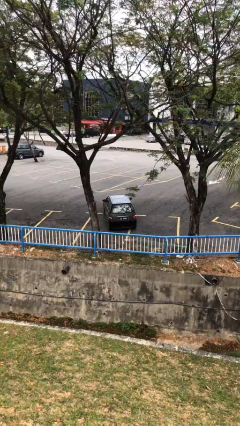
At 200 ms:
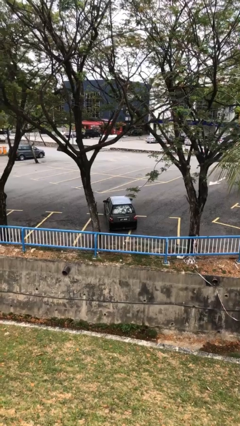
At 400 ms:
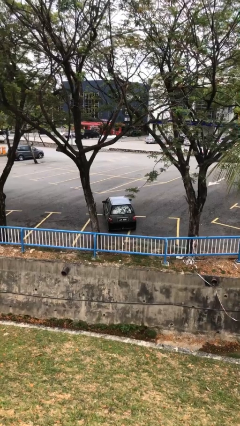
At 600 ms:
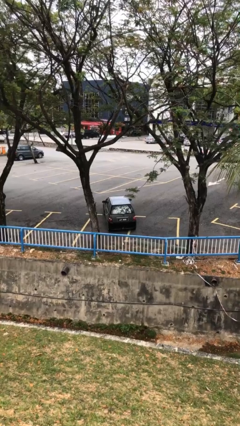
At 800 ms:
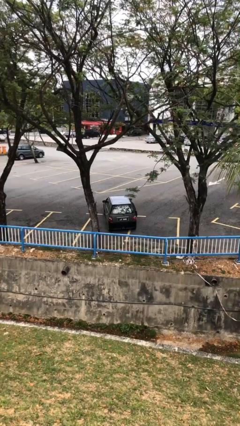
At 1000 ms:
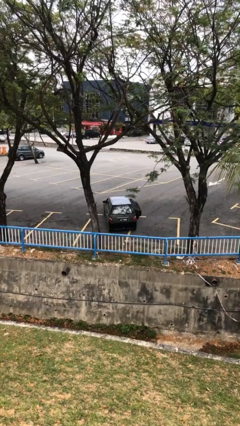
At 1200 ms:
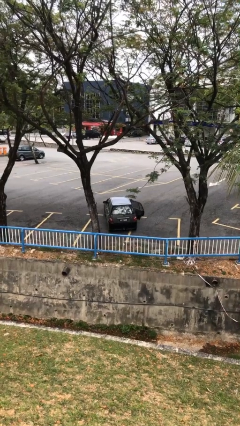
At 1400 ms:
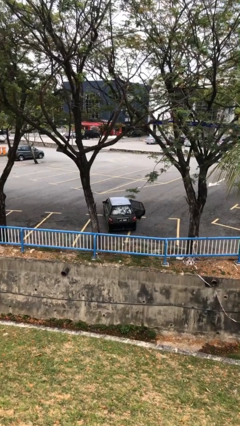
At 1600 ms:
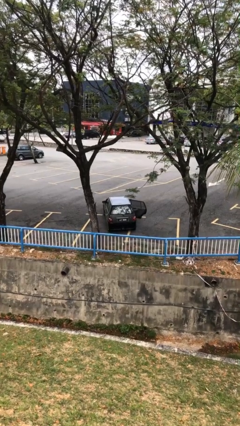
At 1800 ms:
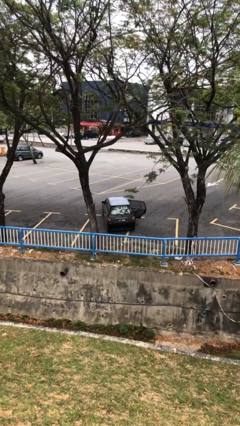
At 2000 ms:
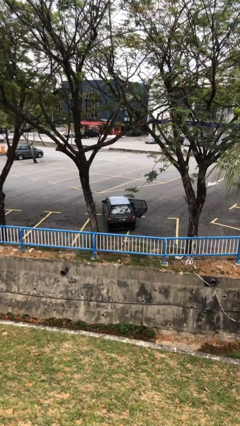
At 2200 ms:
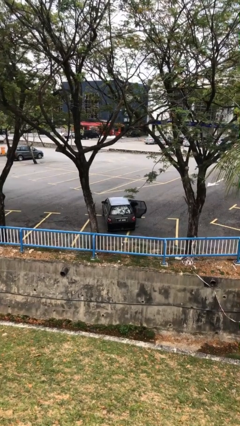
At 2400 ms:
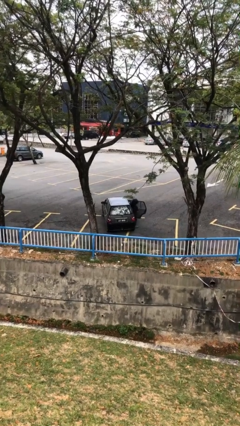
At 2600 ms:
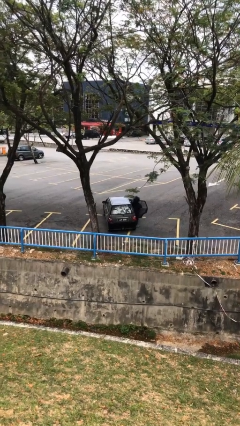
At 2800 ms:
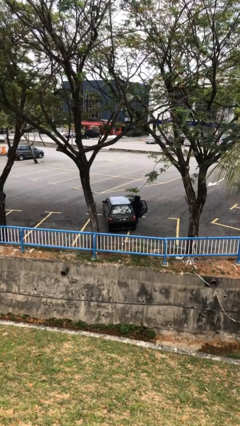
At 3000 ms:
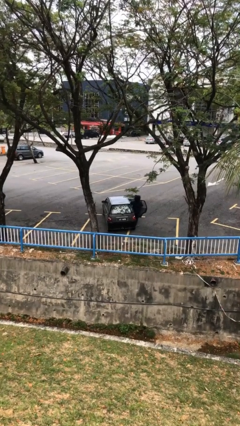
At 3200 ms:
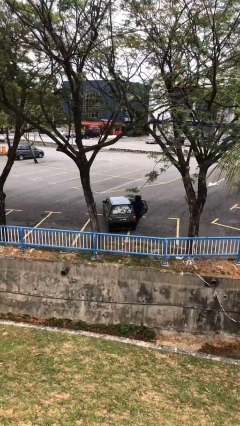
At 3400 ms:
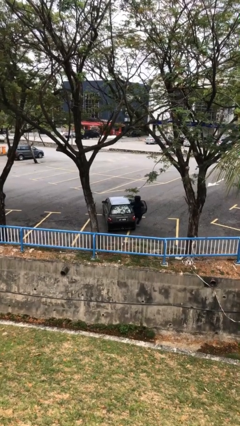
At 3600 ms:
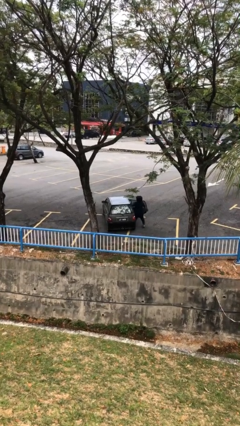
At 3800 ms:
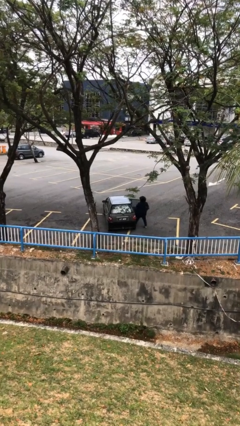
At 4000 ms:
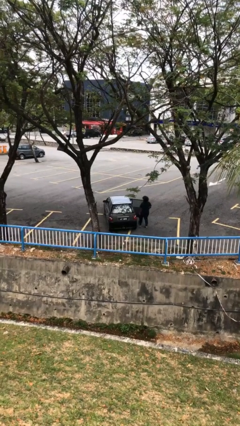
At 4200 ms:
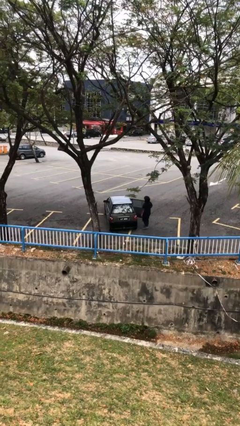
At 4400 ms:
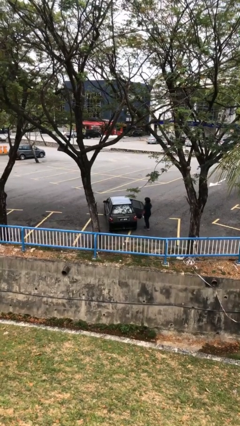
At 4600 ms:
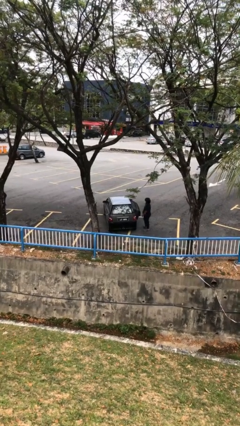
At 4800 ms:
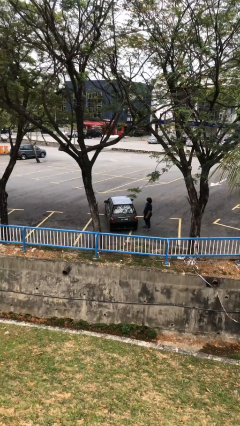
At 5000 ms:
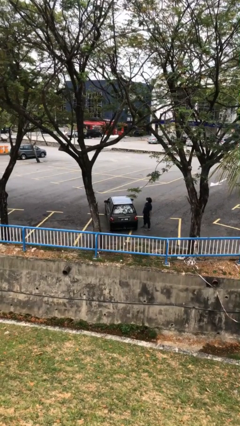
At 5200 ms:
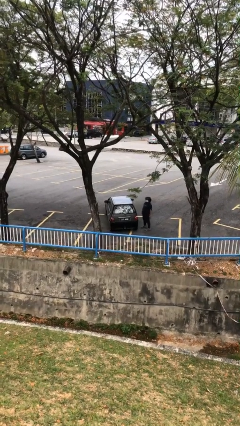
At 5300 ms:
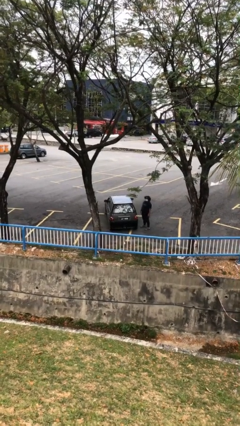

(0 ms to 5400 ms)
car drops off person

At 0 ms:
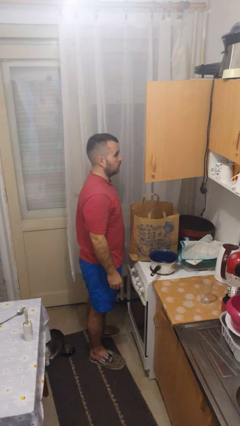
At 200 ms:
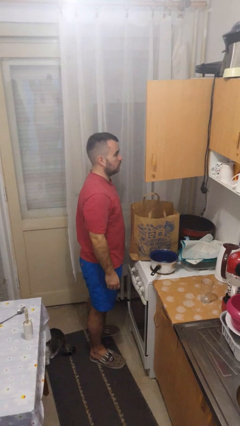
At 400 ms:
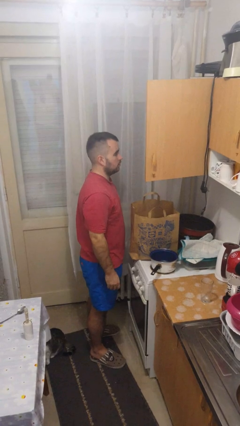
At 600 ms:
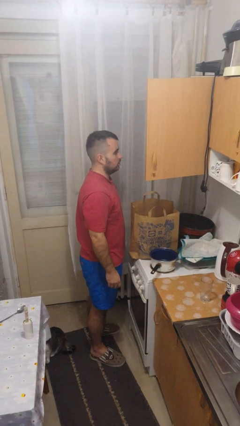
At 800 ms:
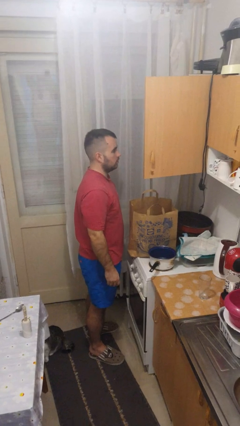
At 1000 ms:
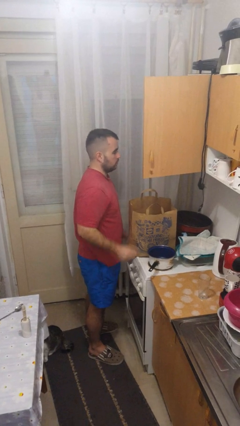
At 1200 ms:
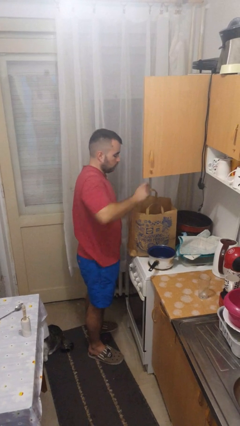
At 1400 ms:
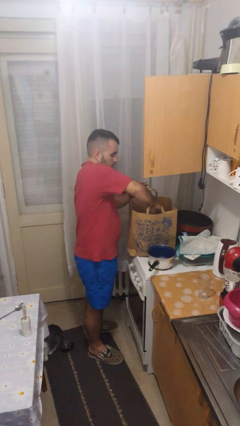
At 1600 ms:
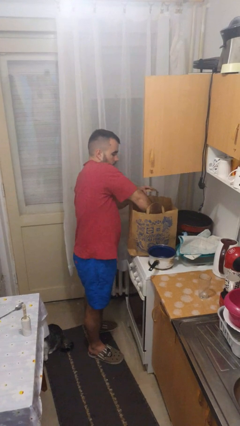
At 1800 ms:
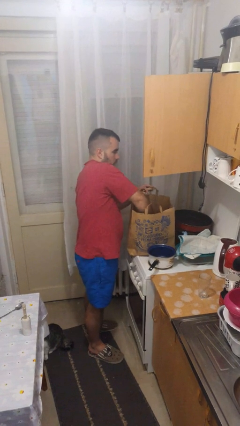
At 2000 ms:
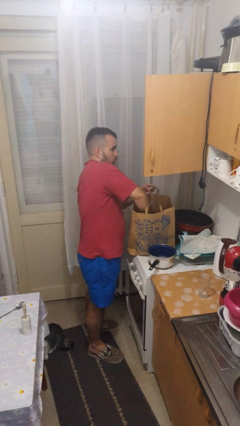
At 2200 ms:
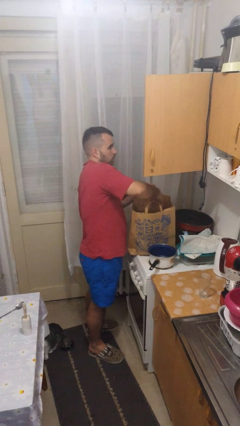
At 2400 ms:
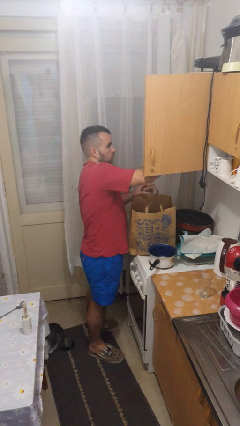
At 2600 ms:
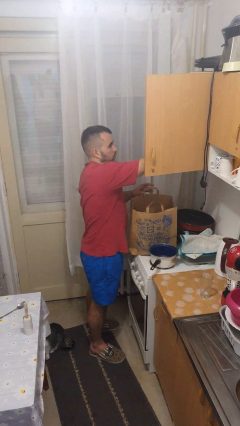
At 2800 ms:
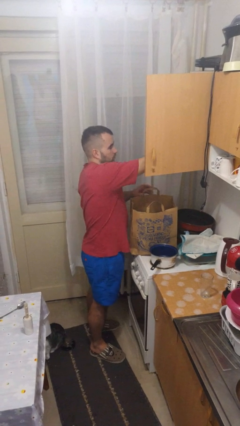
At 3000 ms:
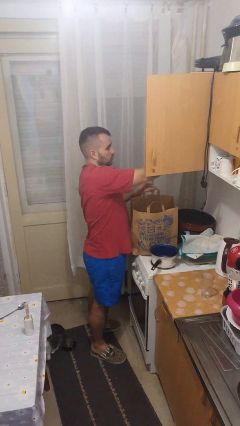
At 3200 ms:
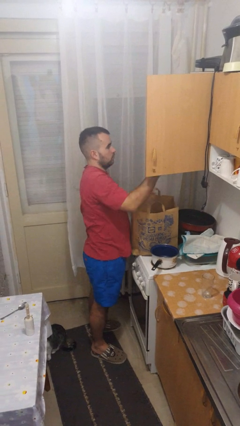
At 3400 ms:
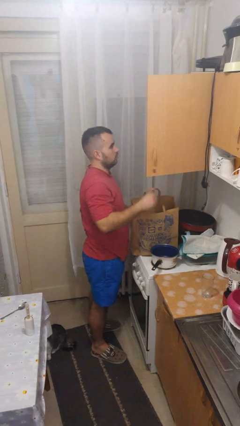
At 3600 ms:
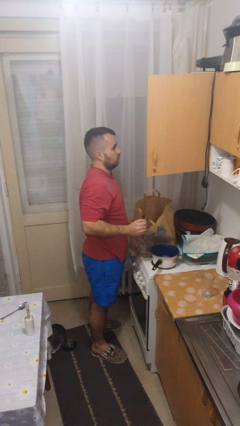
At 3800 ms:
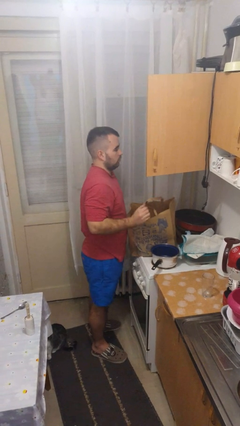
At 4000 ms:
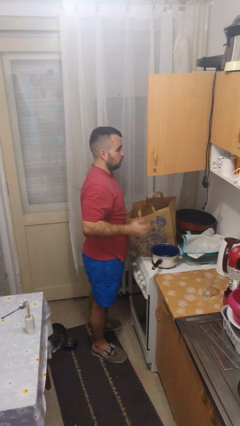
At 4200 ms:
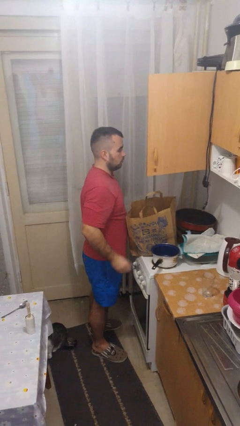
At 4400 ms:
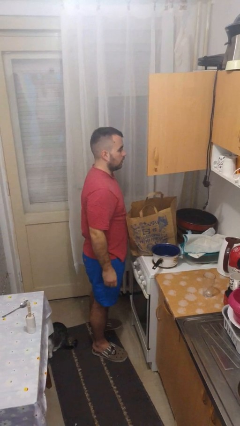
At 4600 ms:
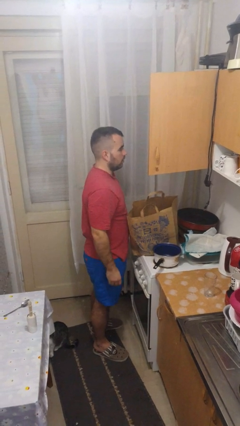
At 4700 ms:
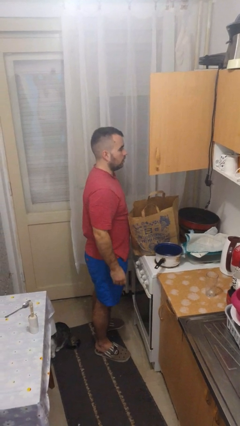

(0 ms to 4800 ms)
person loads groceries into cabinet

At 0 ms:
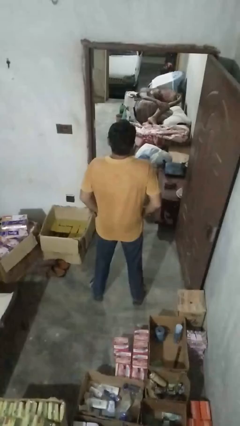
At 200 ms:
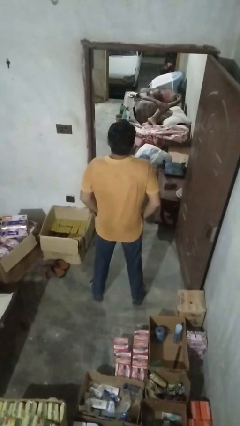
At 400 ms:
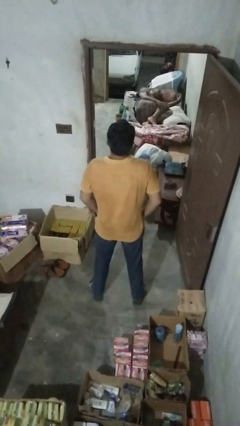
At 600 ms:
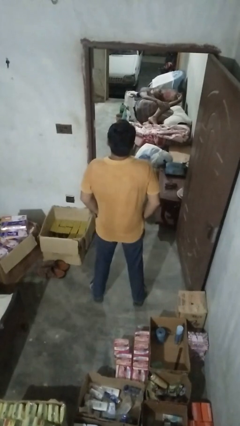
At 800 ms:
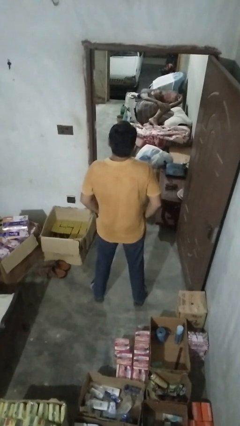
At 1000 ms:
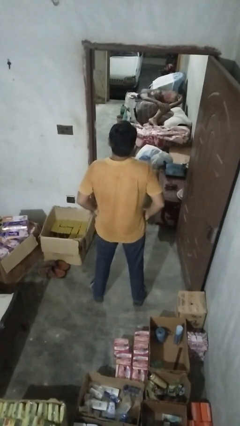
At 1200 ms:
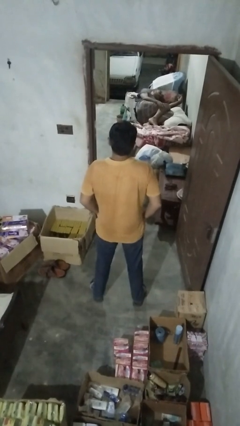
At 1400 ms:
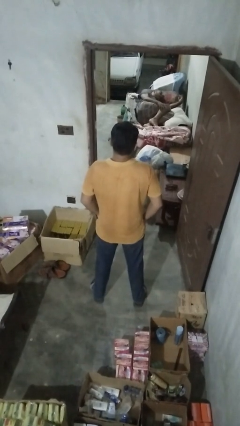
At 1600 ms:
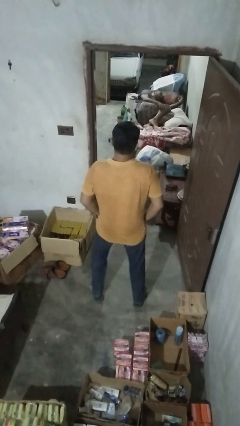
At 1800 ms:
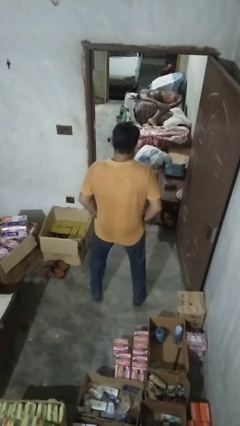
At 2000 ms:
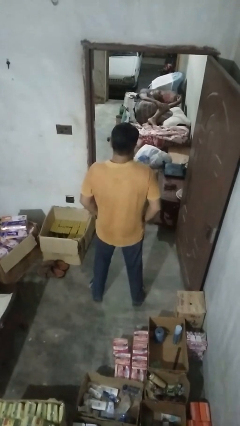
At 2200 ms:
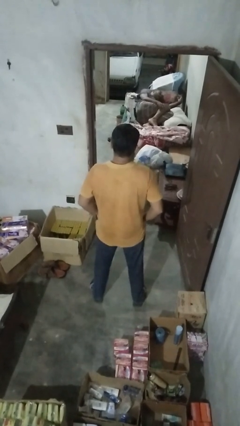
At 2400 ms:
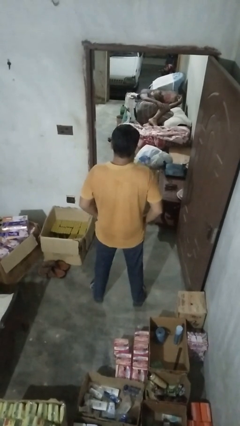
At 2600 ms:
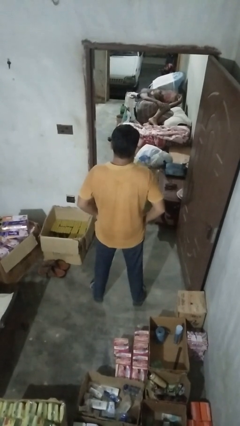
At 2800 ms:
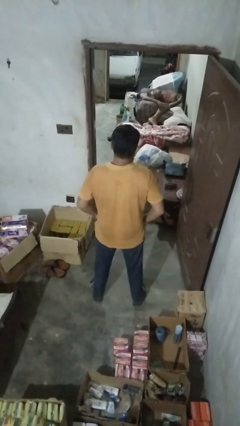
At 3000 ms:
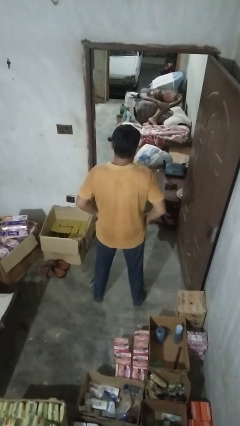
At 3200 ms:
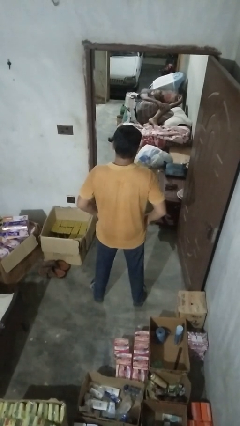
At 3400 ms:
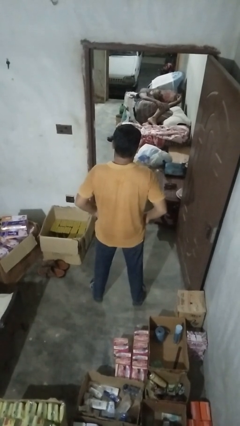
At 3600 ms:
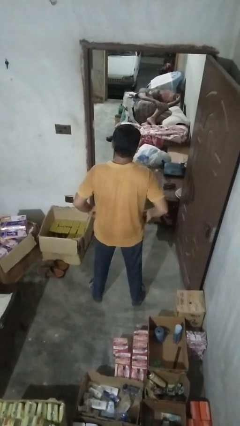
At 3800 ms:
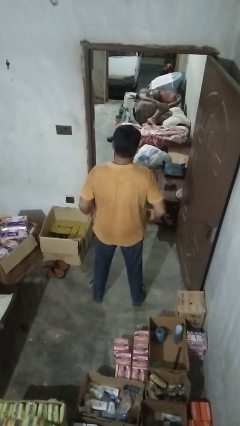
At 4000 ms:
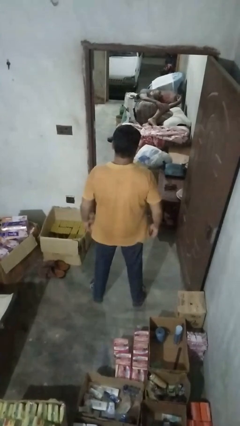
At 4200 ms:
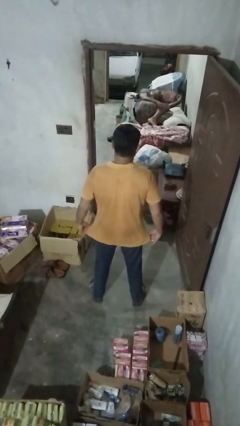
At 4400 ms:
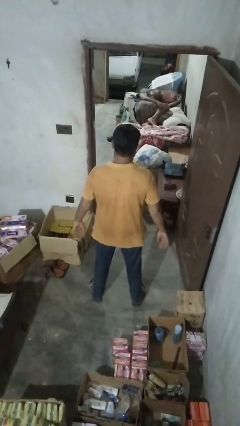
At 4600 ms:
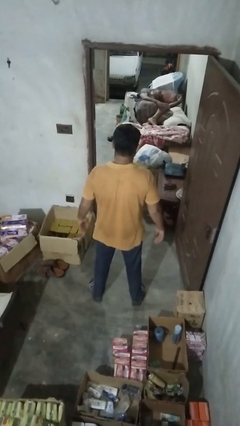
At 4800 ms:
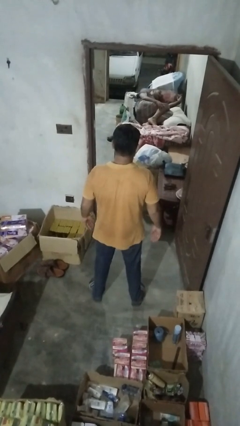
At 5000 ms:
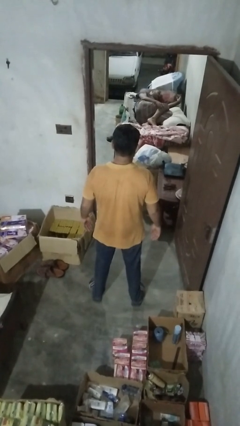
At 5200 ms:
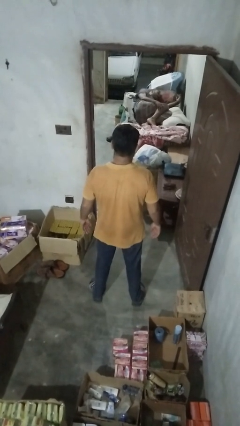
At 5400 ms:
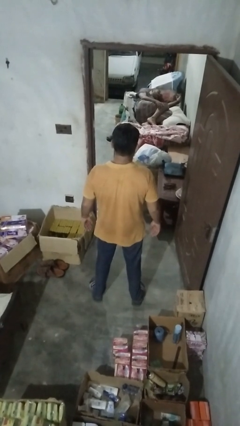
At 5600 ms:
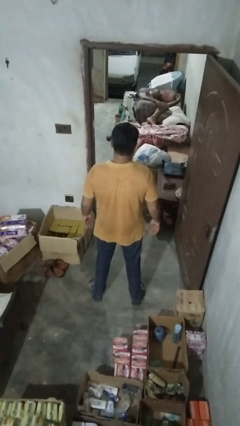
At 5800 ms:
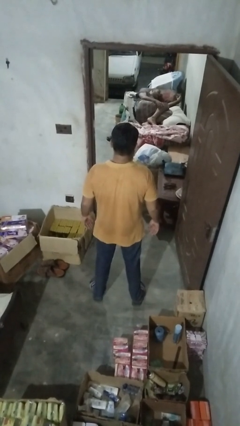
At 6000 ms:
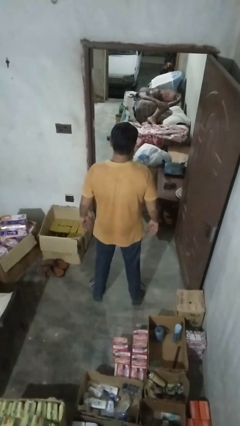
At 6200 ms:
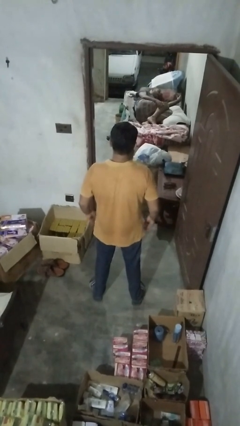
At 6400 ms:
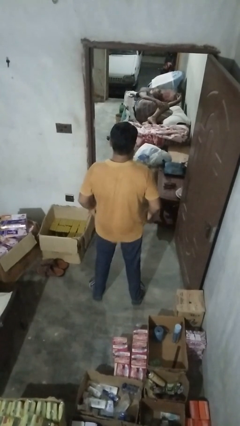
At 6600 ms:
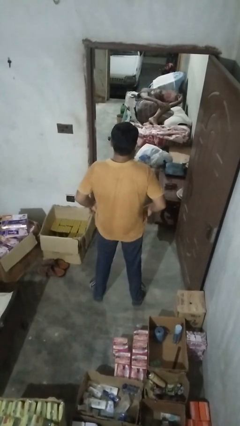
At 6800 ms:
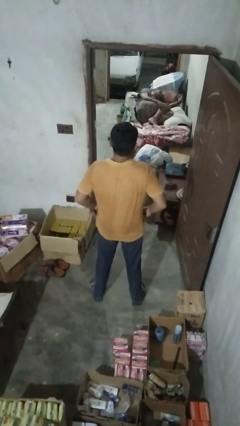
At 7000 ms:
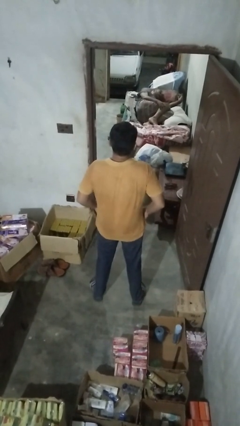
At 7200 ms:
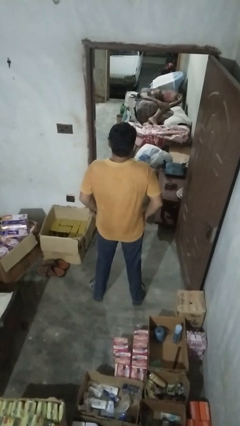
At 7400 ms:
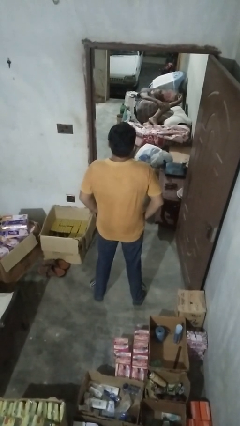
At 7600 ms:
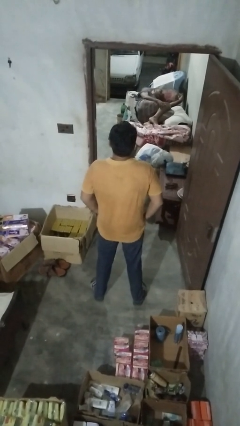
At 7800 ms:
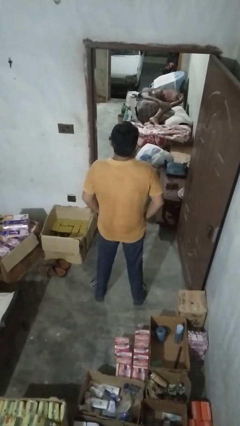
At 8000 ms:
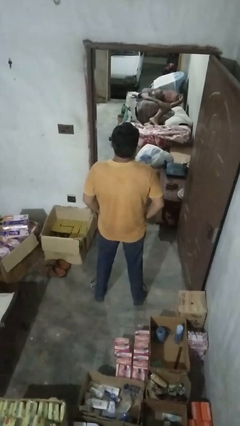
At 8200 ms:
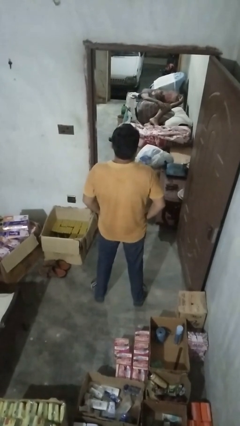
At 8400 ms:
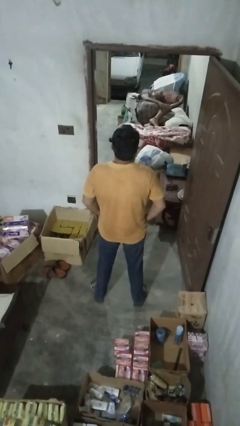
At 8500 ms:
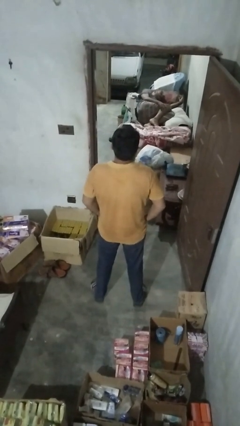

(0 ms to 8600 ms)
person puts hands in back pockets
